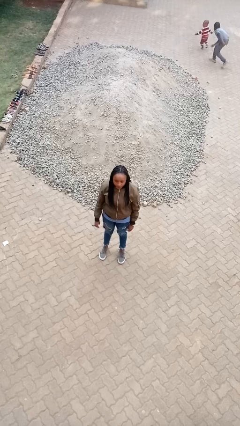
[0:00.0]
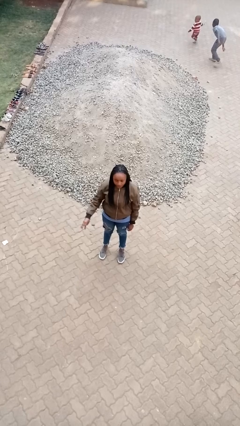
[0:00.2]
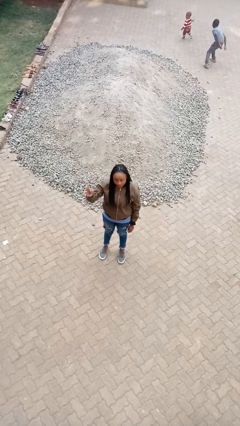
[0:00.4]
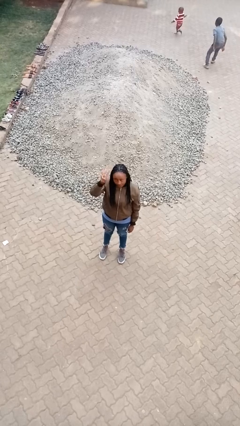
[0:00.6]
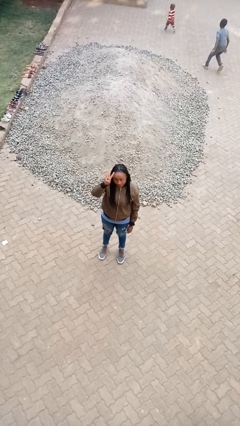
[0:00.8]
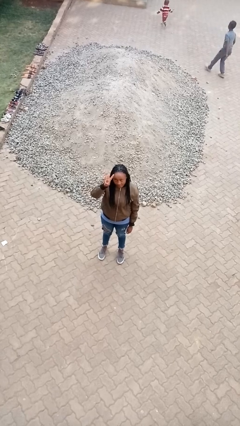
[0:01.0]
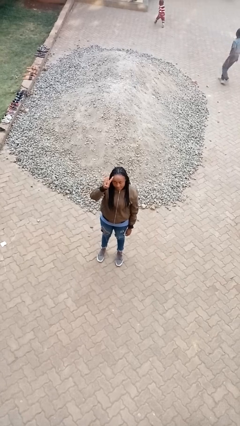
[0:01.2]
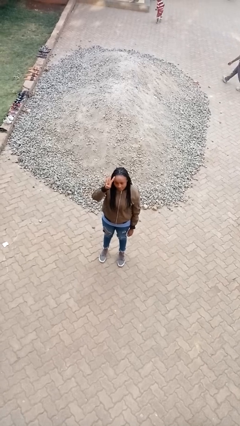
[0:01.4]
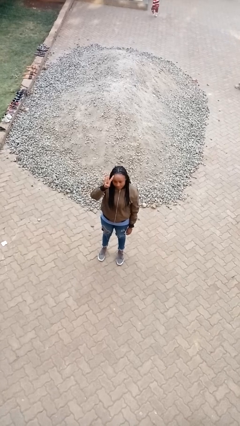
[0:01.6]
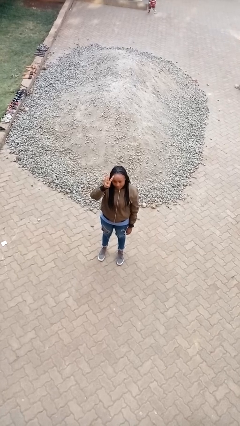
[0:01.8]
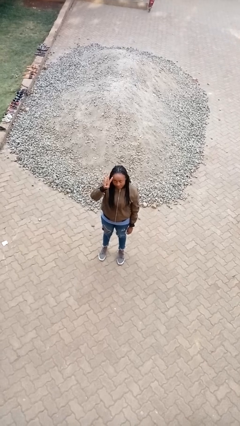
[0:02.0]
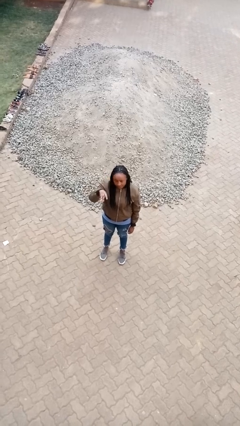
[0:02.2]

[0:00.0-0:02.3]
person gestures number three

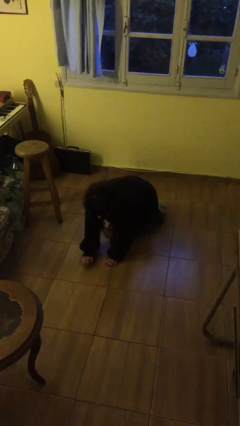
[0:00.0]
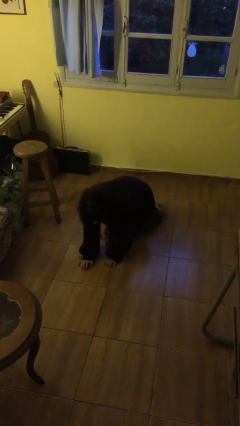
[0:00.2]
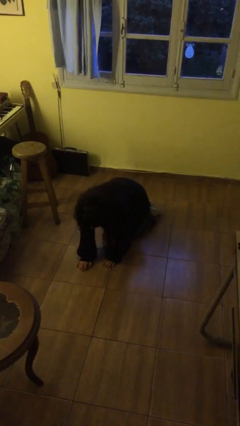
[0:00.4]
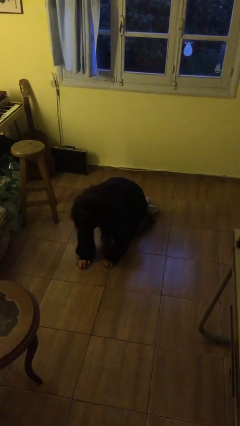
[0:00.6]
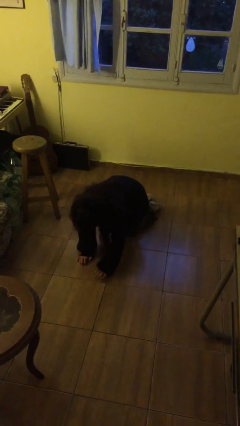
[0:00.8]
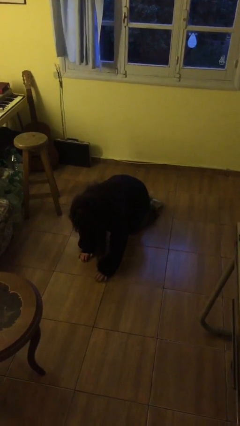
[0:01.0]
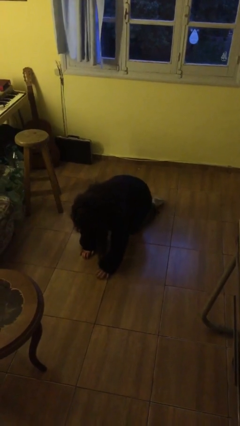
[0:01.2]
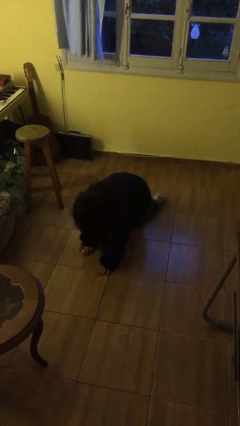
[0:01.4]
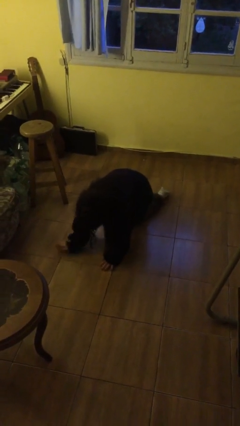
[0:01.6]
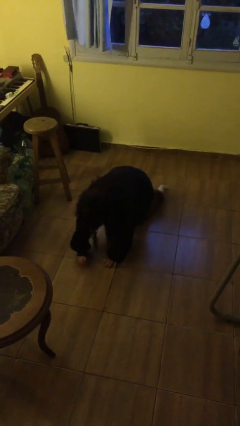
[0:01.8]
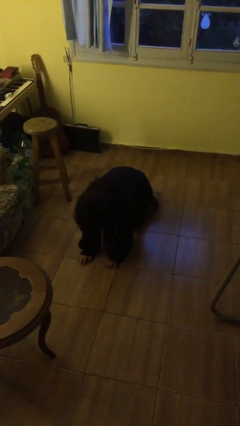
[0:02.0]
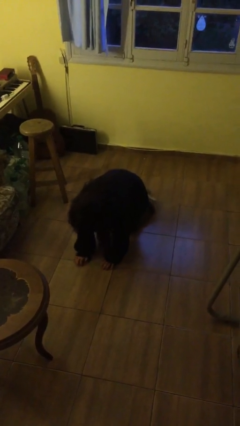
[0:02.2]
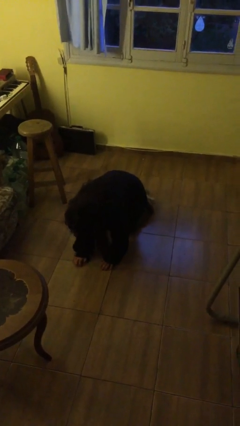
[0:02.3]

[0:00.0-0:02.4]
person crawls

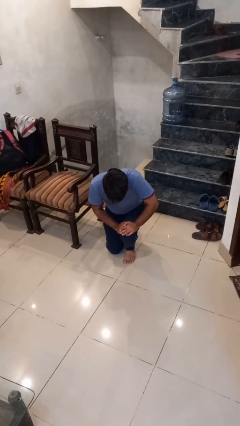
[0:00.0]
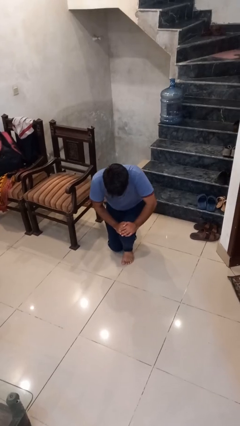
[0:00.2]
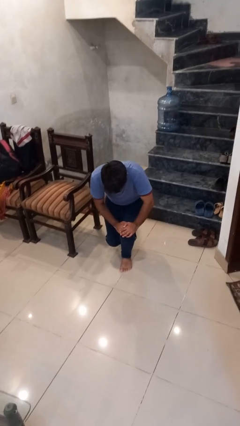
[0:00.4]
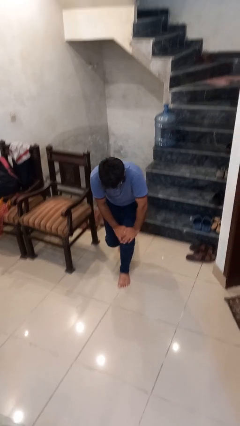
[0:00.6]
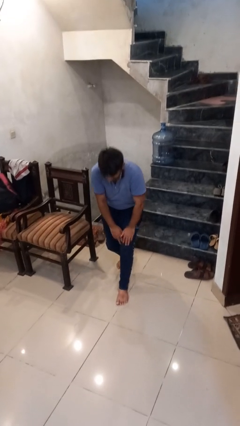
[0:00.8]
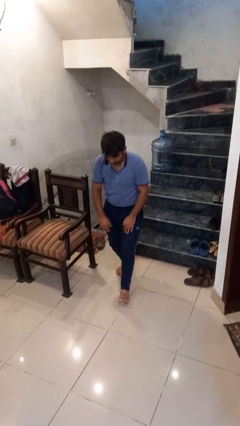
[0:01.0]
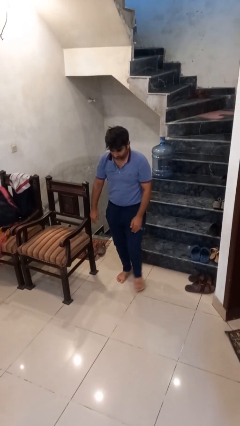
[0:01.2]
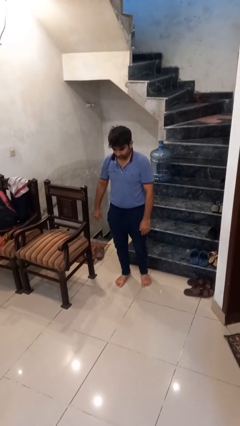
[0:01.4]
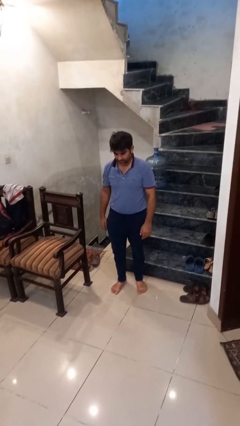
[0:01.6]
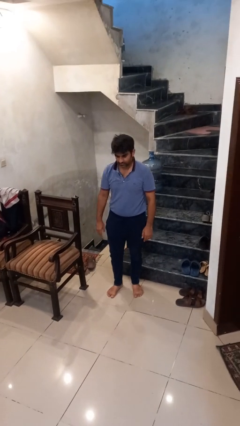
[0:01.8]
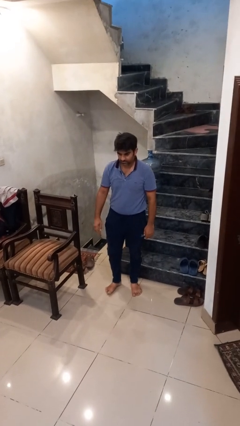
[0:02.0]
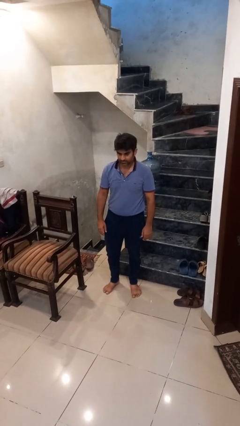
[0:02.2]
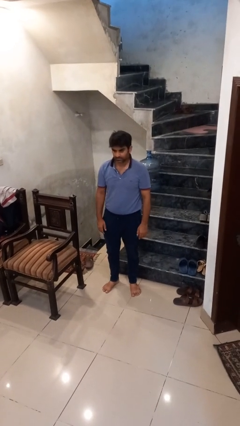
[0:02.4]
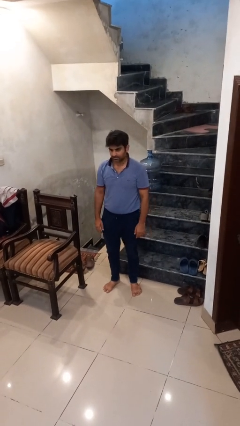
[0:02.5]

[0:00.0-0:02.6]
person stands up from floor

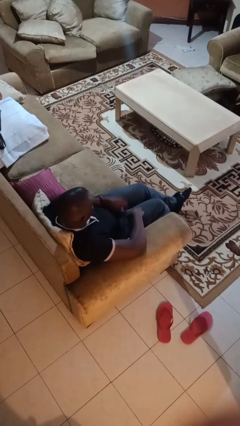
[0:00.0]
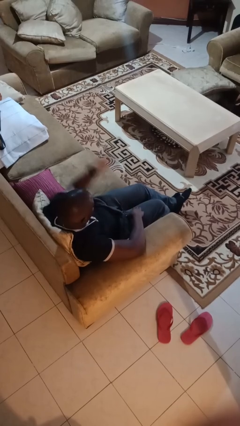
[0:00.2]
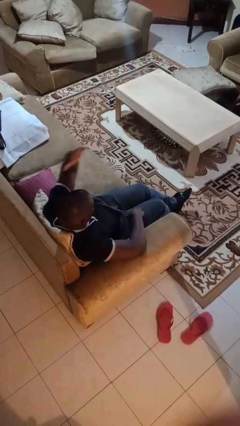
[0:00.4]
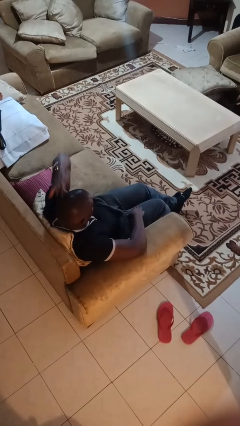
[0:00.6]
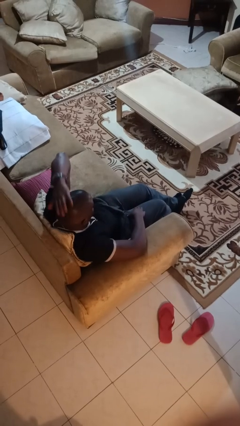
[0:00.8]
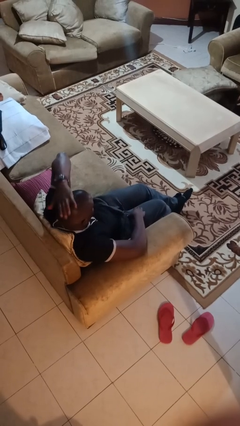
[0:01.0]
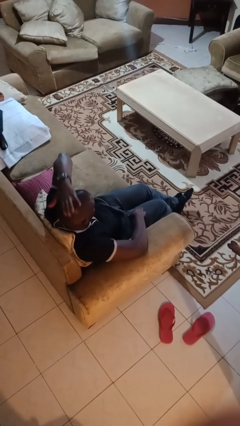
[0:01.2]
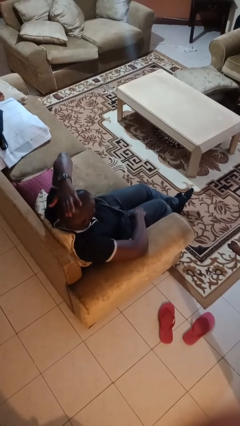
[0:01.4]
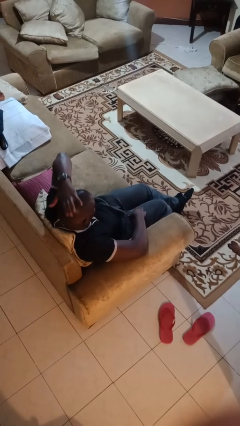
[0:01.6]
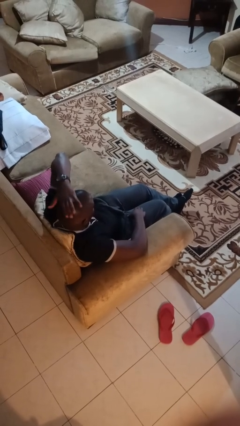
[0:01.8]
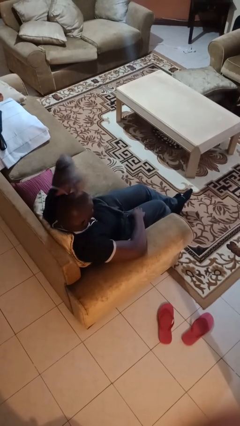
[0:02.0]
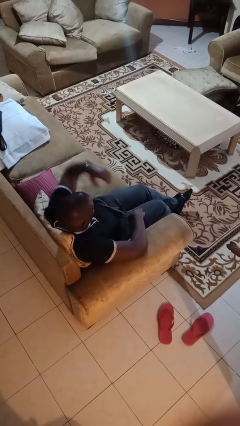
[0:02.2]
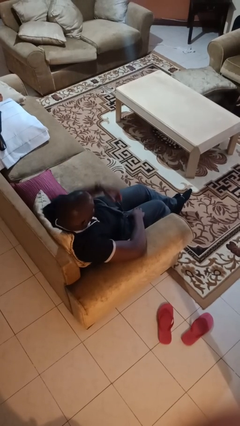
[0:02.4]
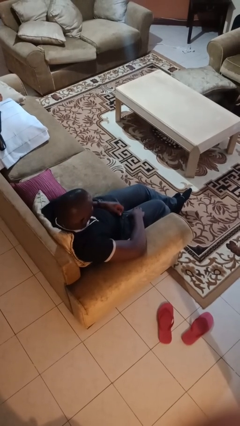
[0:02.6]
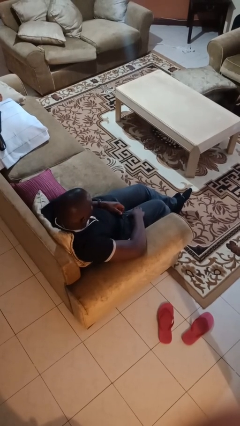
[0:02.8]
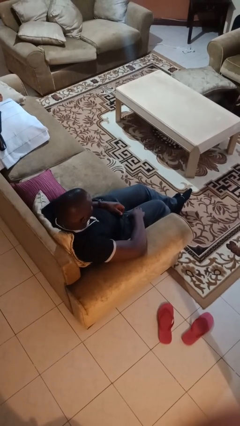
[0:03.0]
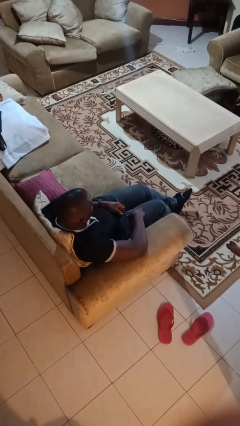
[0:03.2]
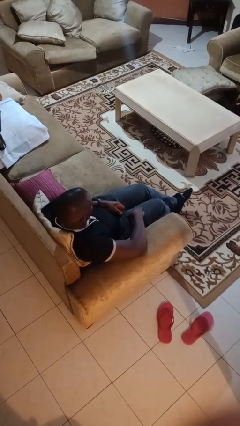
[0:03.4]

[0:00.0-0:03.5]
person pats head

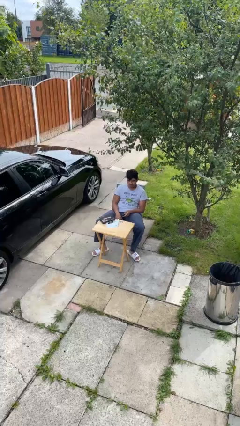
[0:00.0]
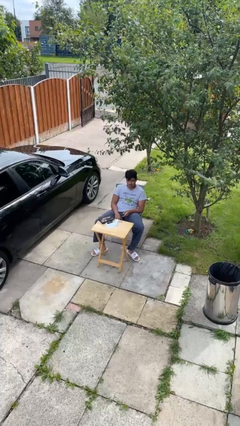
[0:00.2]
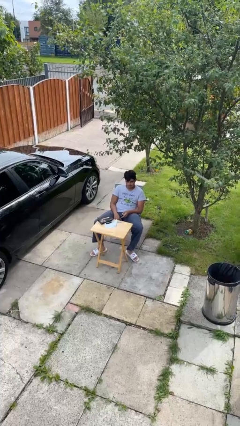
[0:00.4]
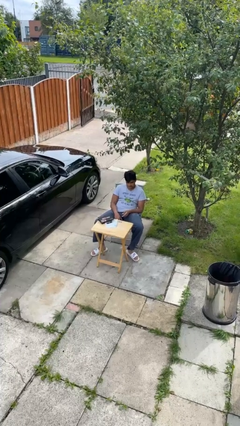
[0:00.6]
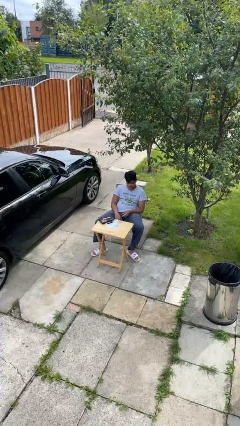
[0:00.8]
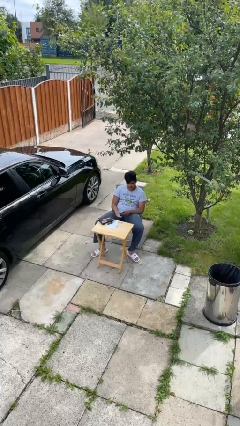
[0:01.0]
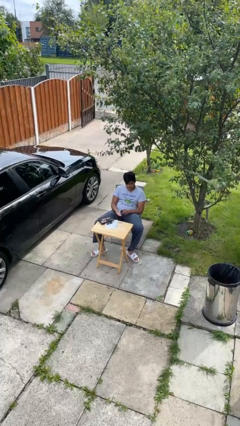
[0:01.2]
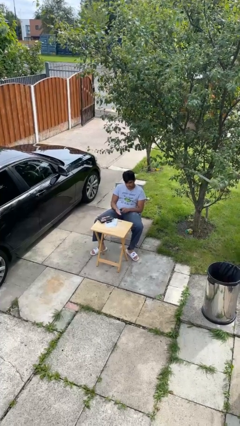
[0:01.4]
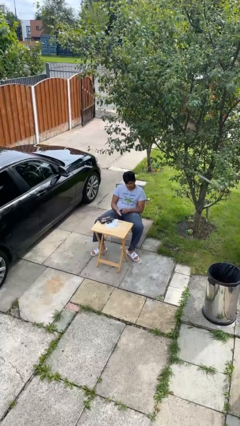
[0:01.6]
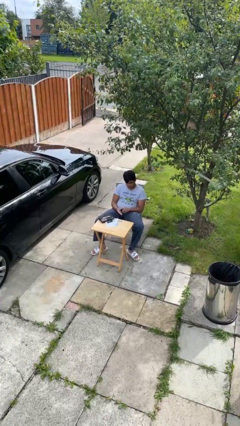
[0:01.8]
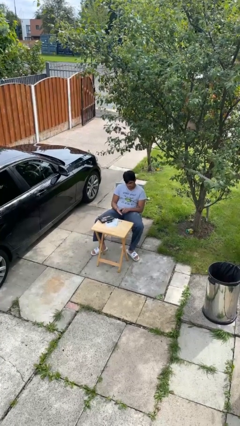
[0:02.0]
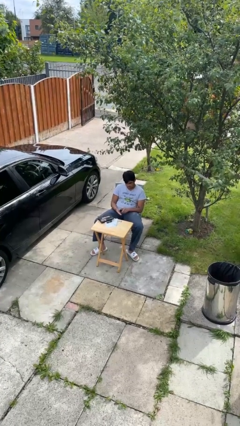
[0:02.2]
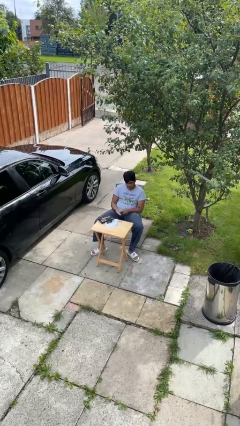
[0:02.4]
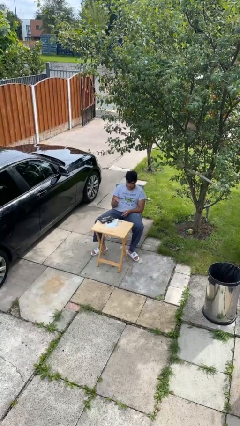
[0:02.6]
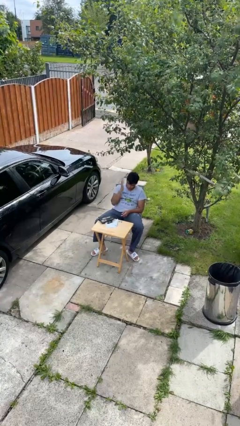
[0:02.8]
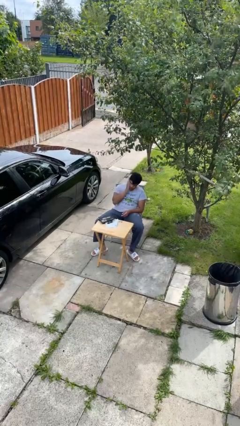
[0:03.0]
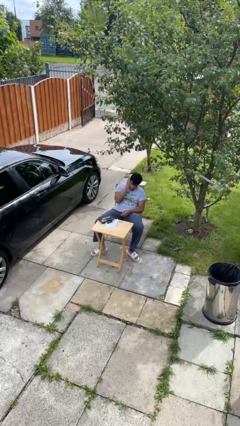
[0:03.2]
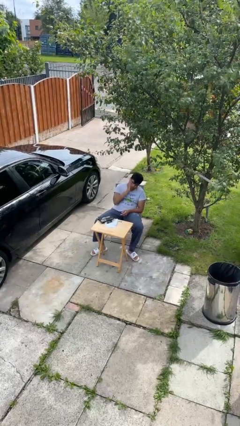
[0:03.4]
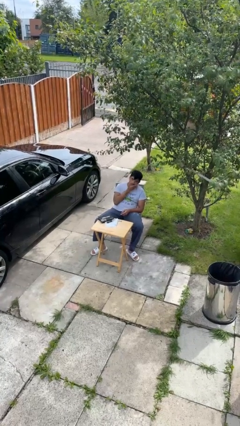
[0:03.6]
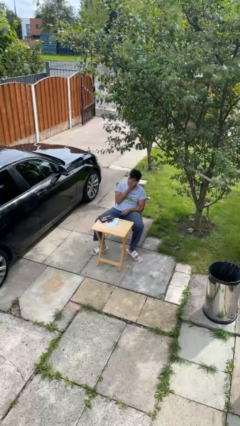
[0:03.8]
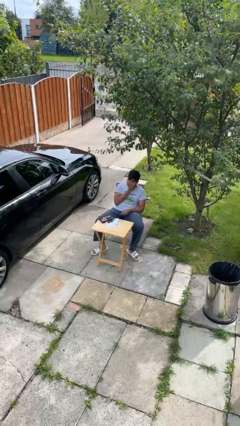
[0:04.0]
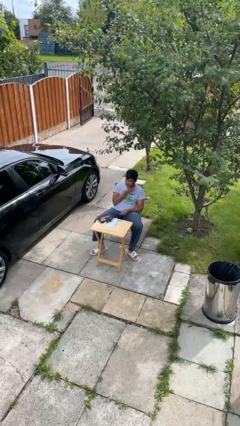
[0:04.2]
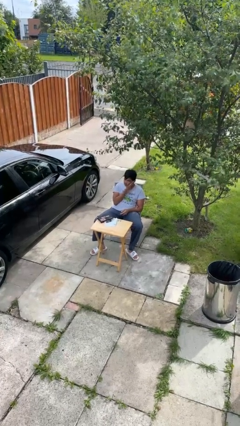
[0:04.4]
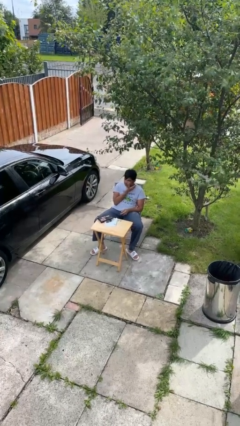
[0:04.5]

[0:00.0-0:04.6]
person applies foundation makeup

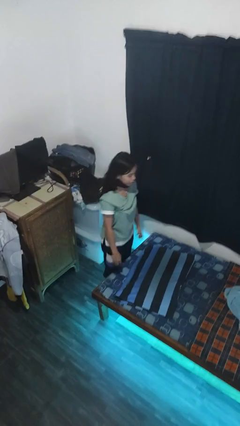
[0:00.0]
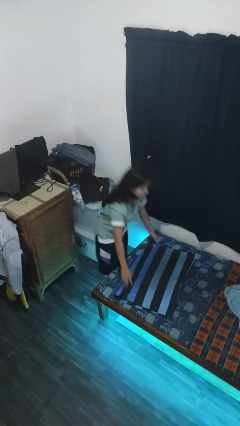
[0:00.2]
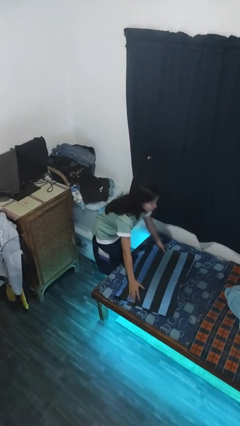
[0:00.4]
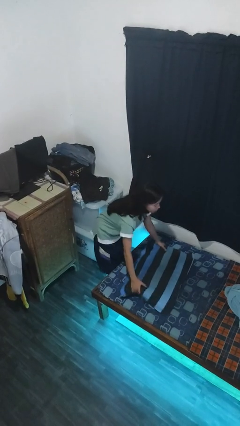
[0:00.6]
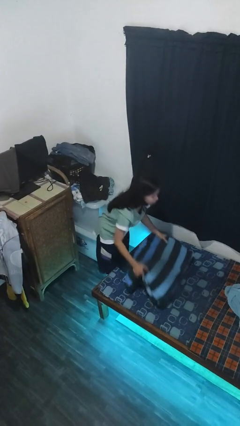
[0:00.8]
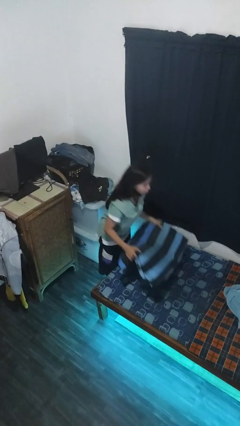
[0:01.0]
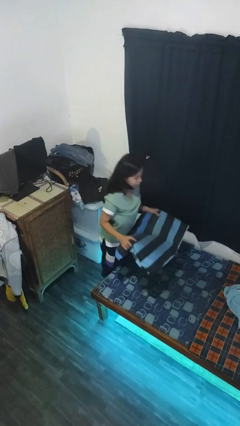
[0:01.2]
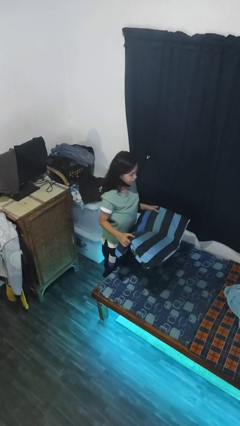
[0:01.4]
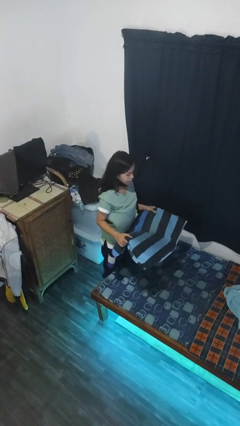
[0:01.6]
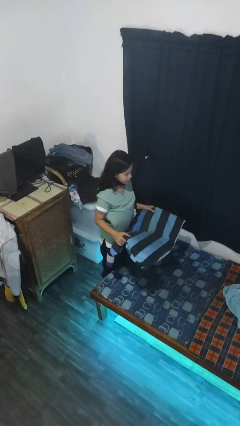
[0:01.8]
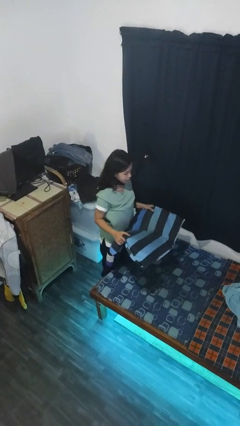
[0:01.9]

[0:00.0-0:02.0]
person picks up object from bed
